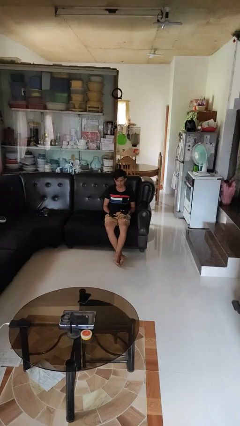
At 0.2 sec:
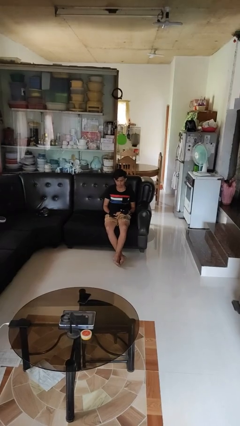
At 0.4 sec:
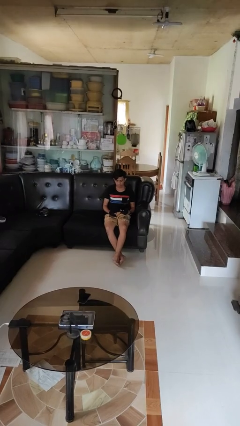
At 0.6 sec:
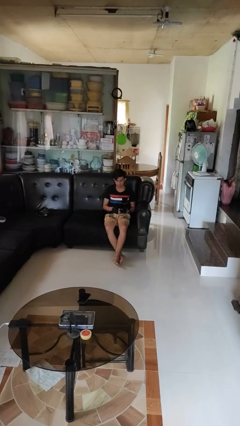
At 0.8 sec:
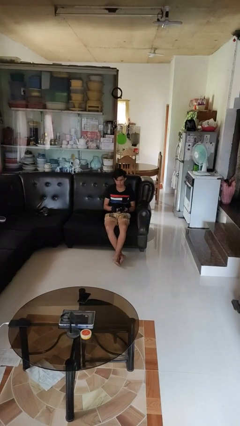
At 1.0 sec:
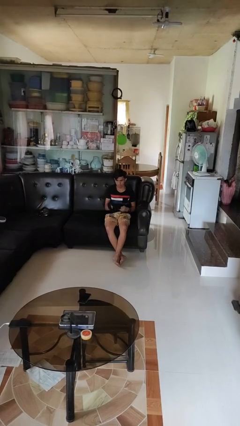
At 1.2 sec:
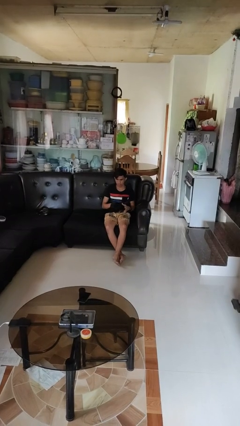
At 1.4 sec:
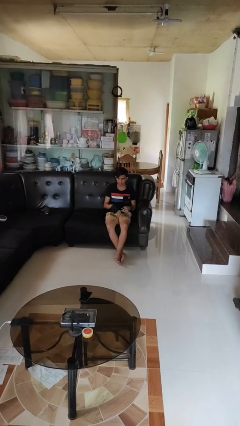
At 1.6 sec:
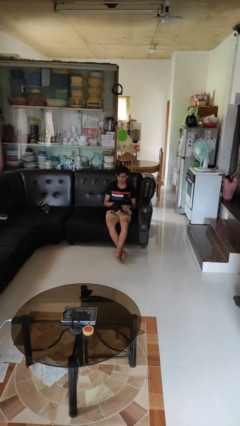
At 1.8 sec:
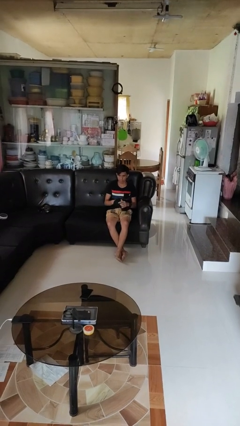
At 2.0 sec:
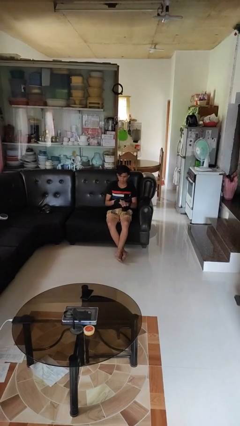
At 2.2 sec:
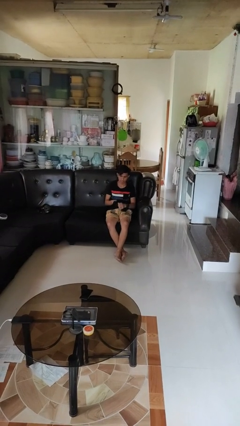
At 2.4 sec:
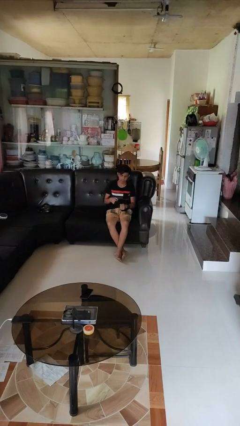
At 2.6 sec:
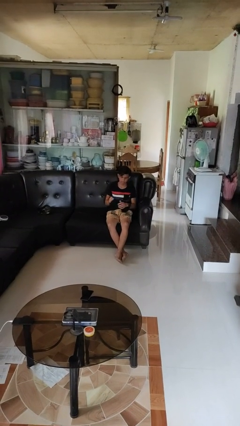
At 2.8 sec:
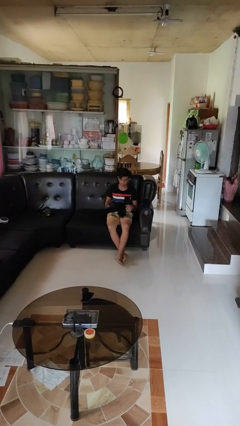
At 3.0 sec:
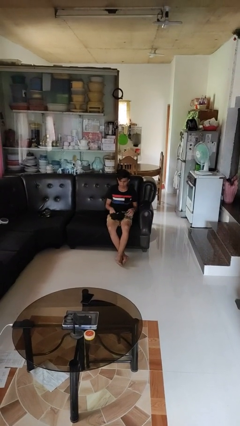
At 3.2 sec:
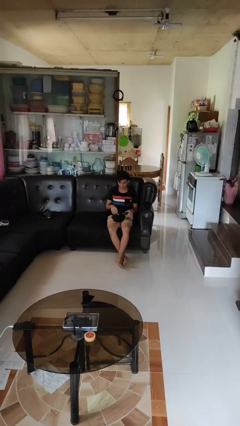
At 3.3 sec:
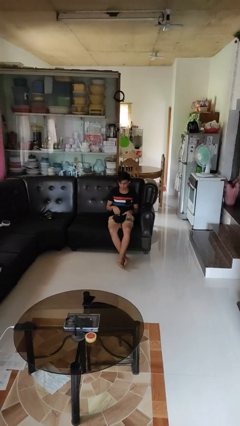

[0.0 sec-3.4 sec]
person takes off gloves

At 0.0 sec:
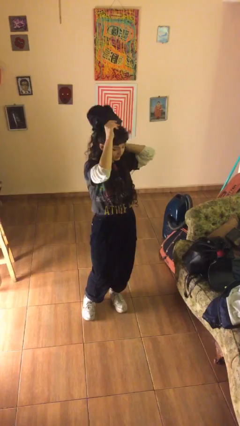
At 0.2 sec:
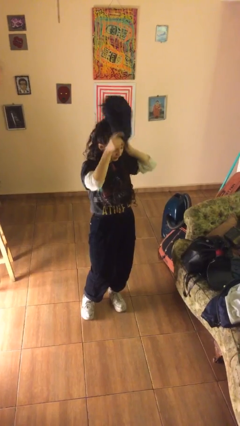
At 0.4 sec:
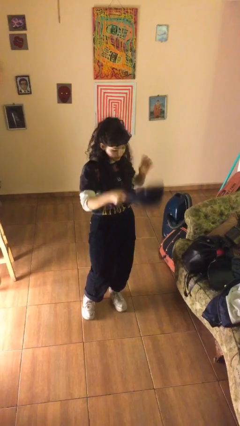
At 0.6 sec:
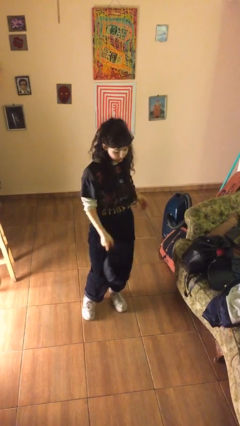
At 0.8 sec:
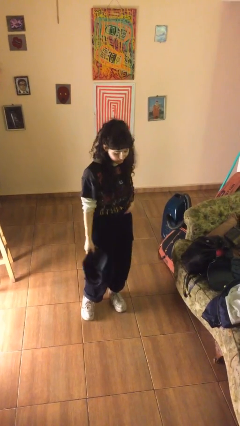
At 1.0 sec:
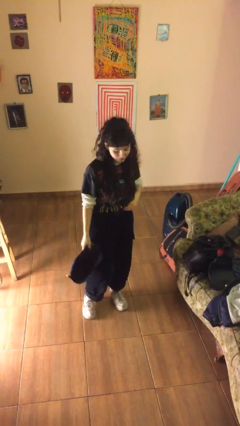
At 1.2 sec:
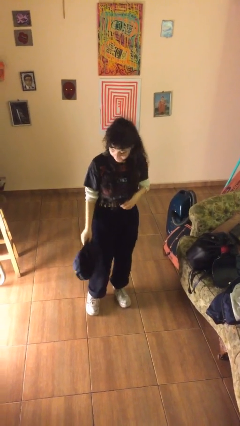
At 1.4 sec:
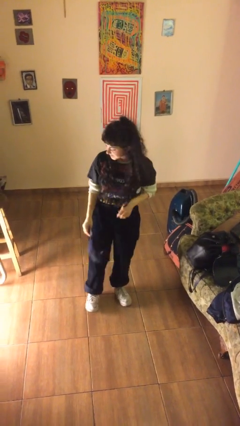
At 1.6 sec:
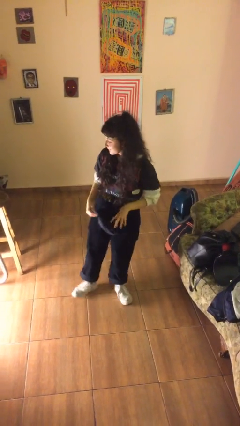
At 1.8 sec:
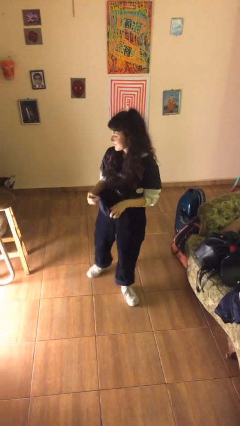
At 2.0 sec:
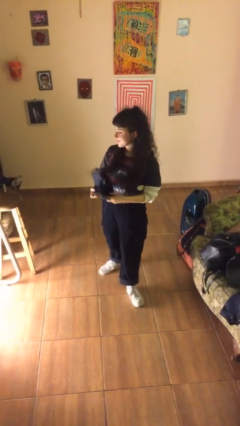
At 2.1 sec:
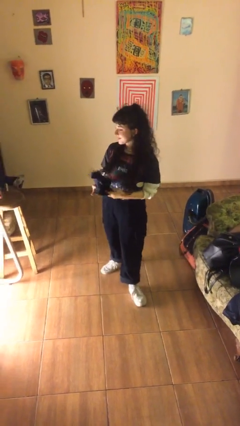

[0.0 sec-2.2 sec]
person takes off hat

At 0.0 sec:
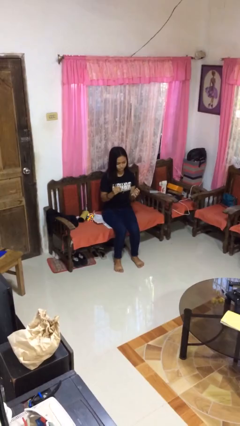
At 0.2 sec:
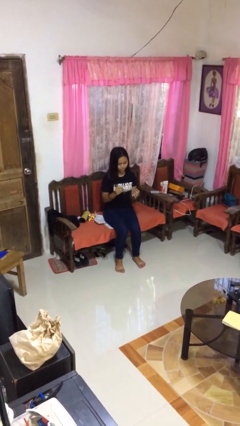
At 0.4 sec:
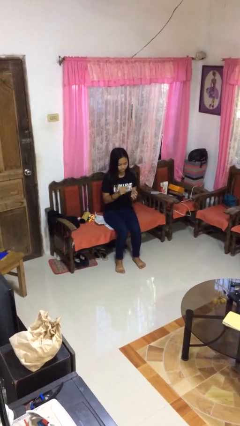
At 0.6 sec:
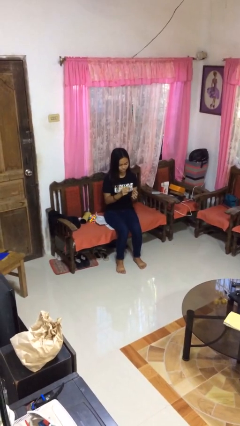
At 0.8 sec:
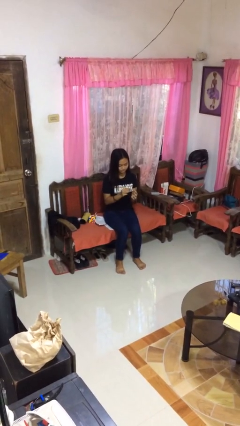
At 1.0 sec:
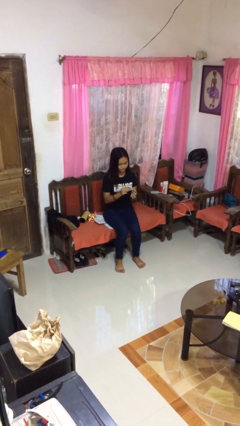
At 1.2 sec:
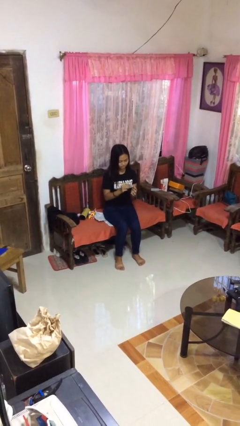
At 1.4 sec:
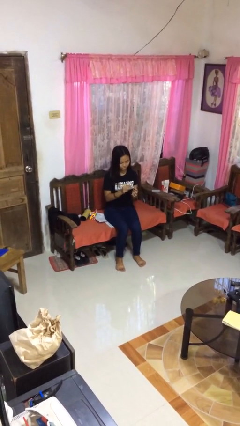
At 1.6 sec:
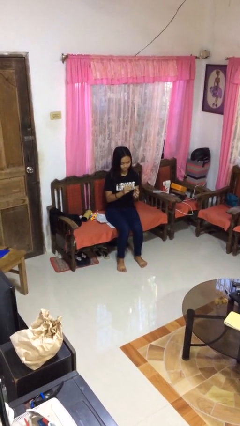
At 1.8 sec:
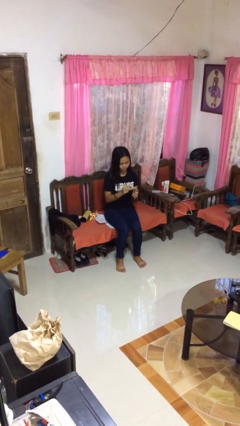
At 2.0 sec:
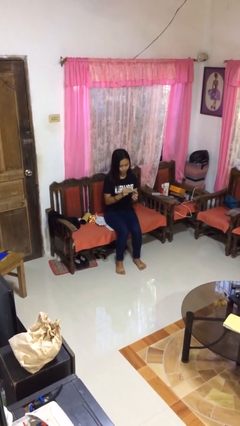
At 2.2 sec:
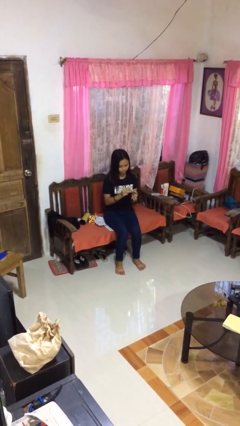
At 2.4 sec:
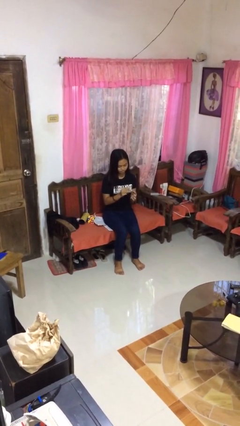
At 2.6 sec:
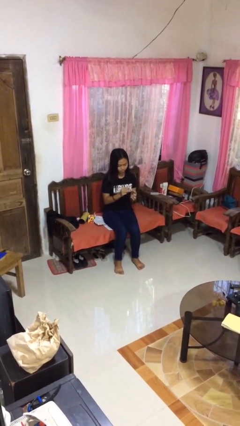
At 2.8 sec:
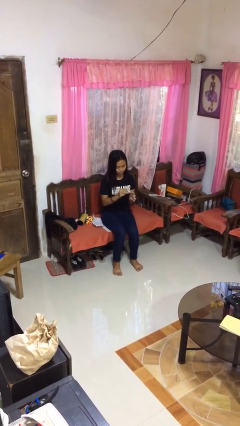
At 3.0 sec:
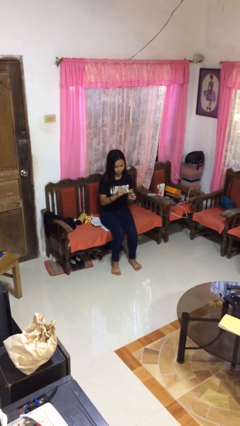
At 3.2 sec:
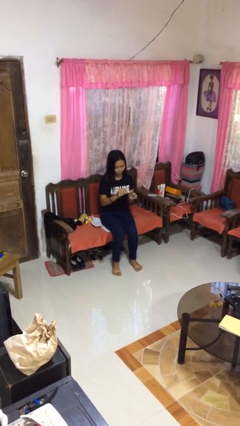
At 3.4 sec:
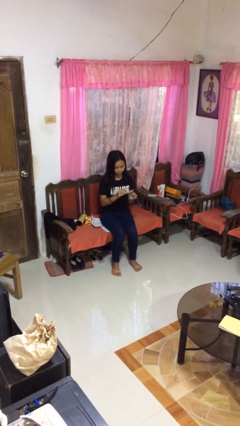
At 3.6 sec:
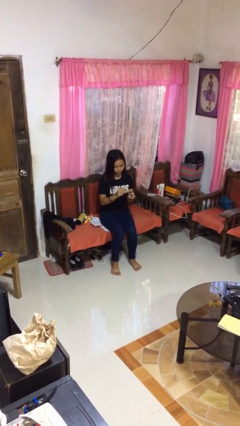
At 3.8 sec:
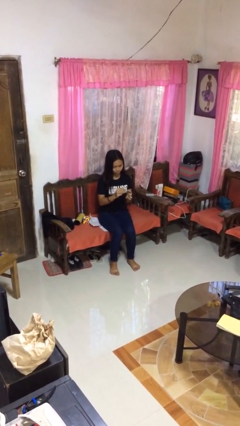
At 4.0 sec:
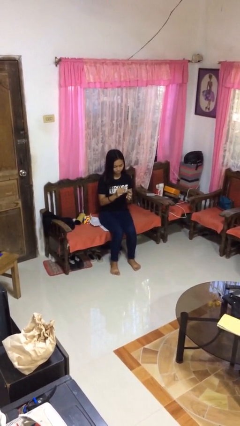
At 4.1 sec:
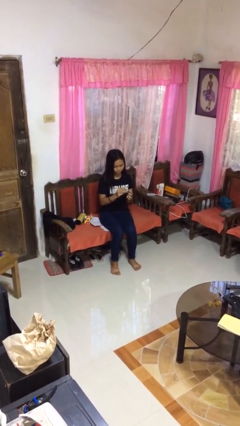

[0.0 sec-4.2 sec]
person clips fingernails

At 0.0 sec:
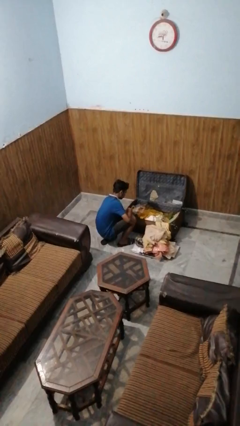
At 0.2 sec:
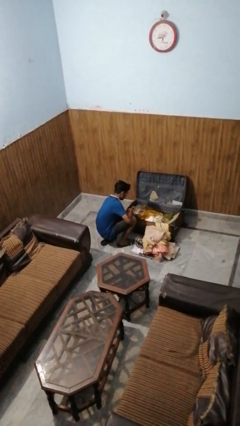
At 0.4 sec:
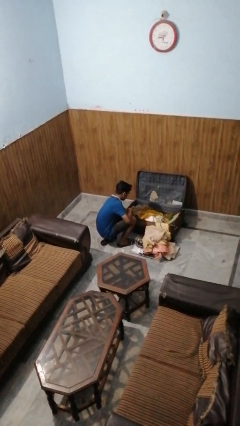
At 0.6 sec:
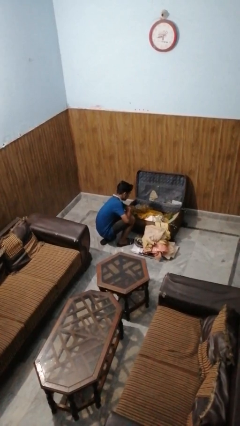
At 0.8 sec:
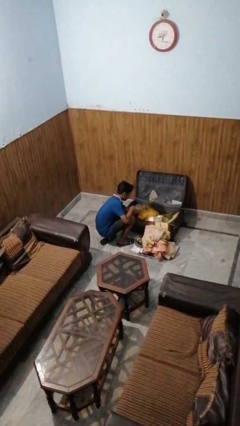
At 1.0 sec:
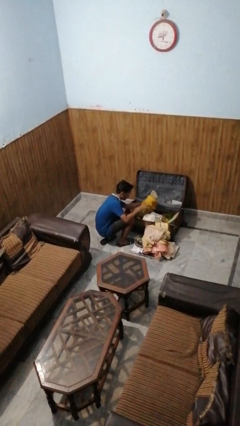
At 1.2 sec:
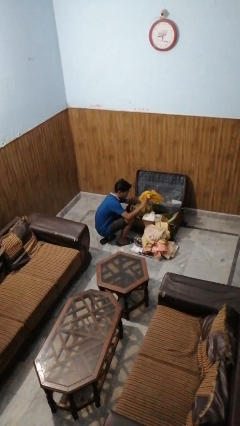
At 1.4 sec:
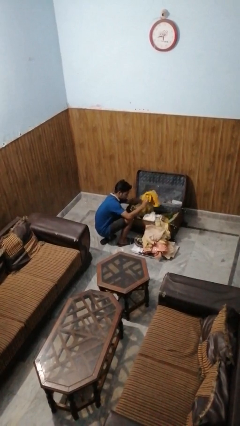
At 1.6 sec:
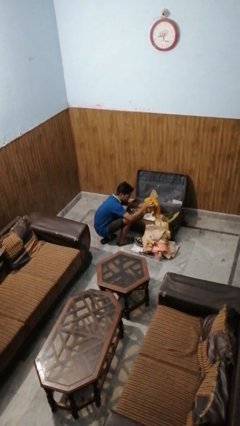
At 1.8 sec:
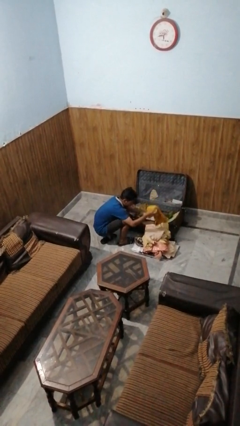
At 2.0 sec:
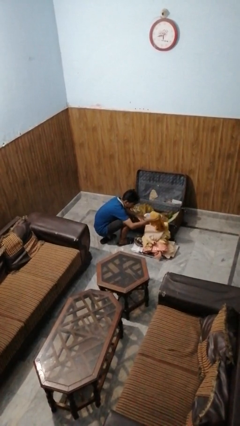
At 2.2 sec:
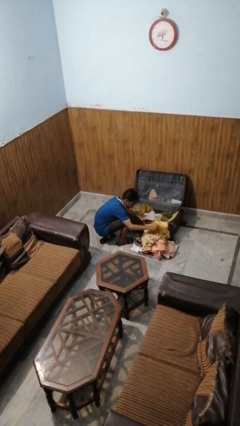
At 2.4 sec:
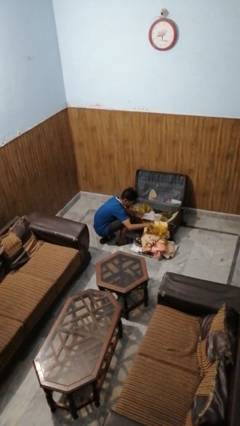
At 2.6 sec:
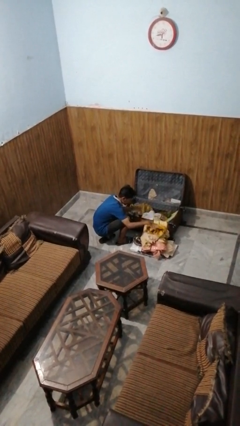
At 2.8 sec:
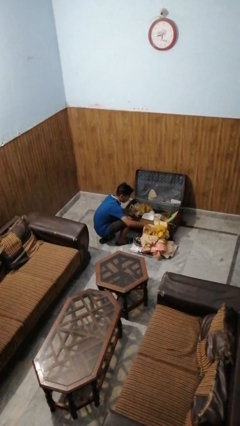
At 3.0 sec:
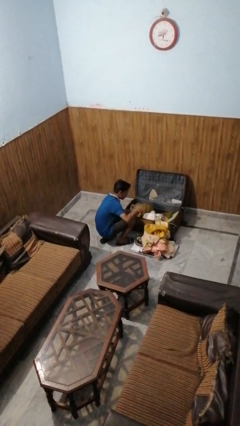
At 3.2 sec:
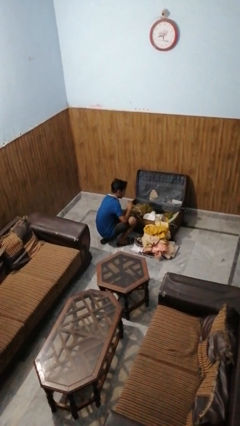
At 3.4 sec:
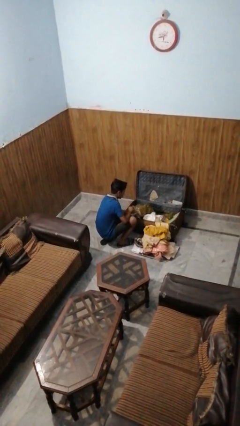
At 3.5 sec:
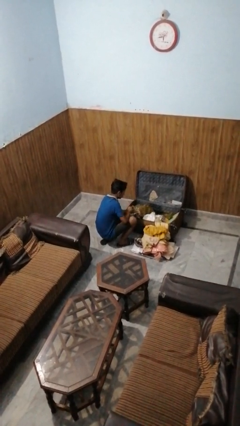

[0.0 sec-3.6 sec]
person unloads clothes from suitcase

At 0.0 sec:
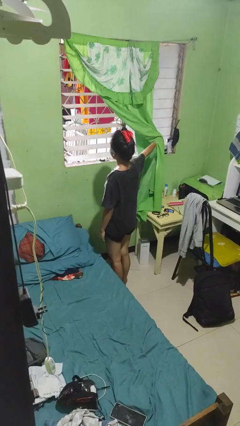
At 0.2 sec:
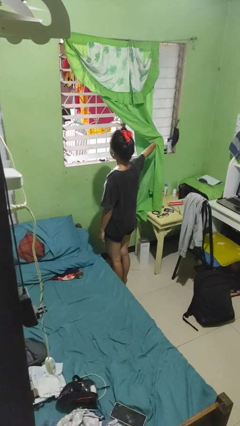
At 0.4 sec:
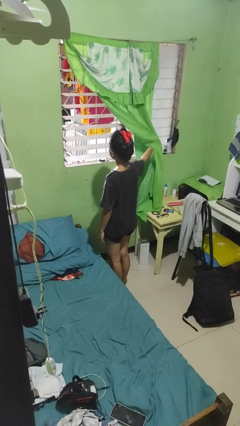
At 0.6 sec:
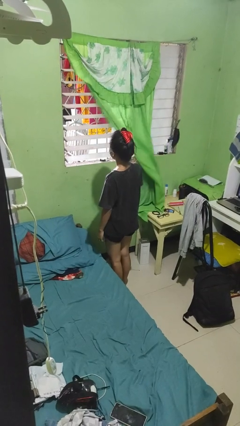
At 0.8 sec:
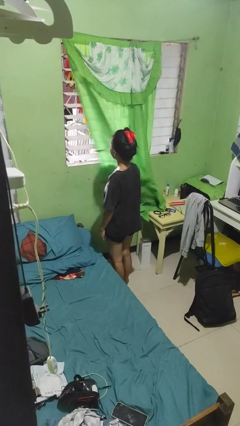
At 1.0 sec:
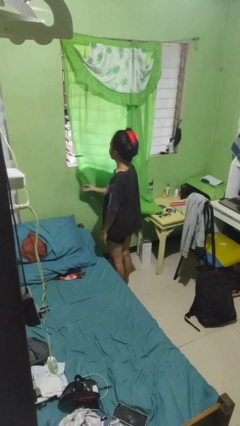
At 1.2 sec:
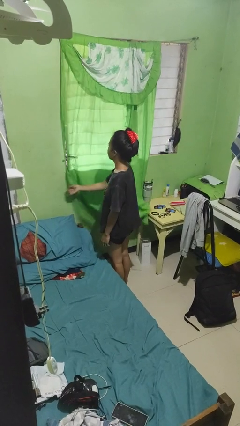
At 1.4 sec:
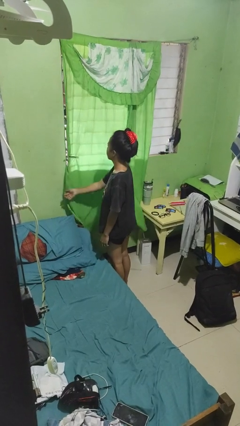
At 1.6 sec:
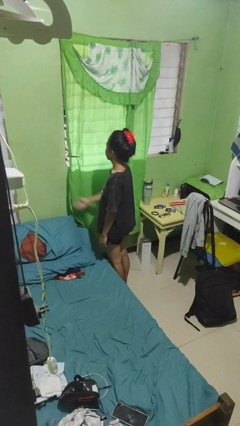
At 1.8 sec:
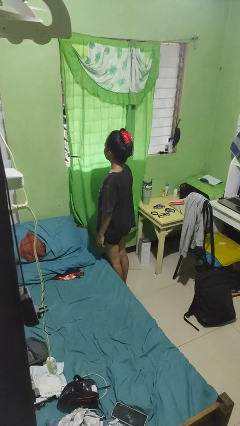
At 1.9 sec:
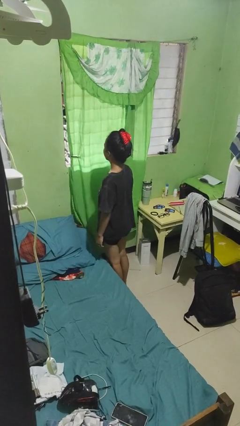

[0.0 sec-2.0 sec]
person closes curtains

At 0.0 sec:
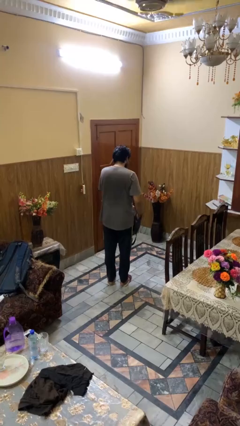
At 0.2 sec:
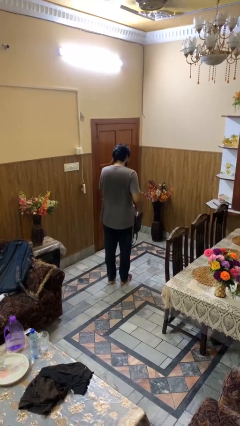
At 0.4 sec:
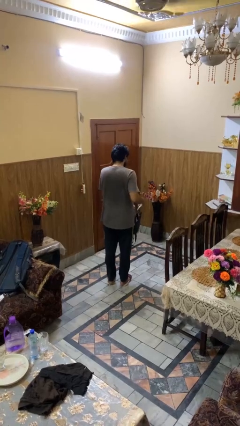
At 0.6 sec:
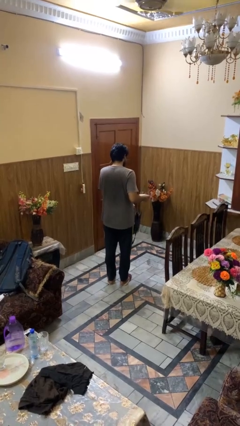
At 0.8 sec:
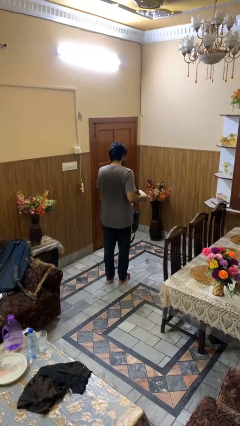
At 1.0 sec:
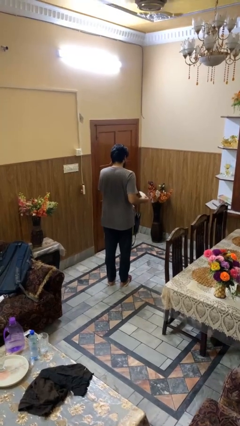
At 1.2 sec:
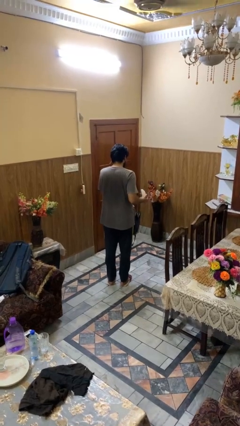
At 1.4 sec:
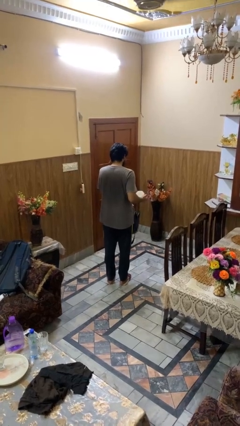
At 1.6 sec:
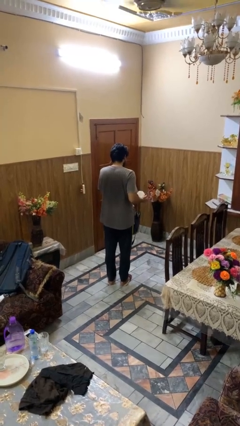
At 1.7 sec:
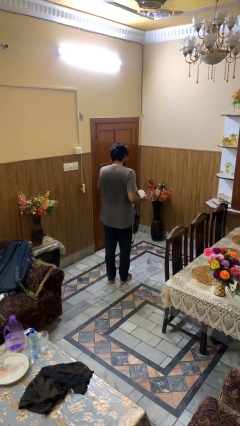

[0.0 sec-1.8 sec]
person takes object from purse
